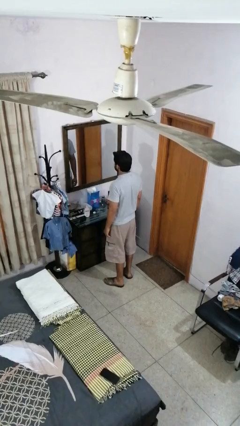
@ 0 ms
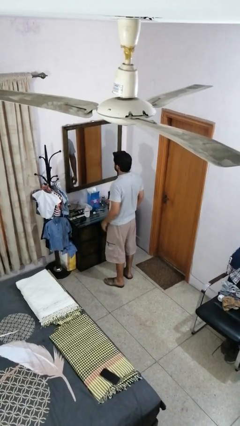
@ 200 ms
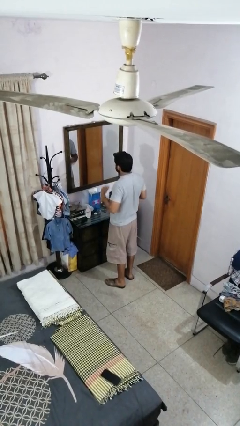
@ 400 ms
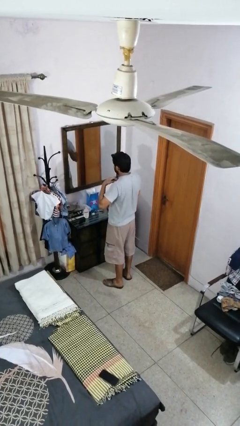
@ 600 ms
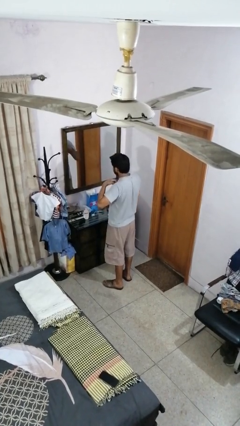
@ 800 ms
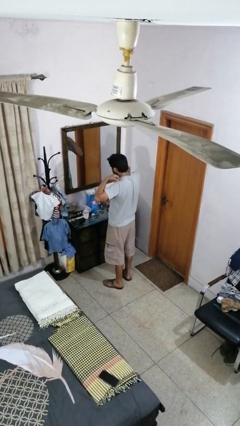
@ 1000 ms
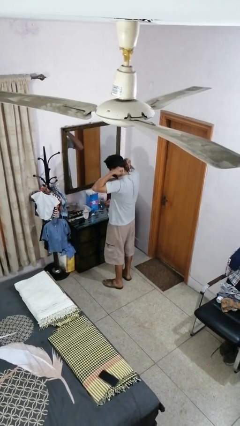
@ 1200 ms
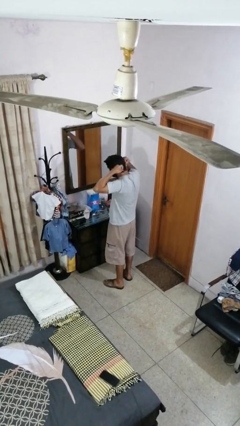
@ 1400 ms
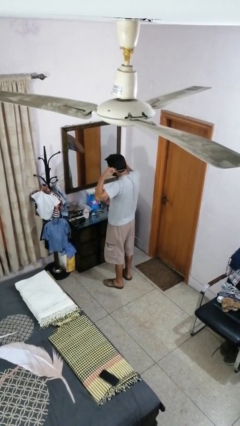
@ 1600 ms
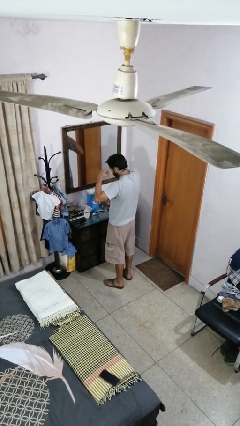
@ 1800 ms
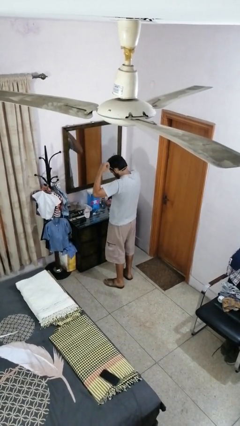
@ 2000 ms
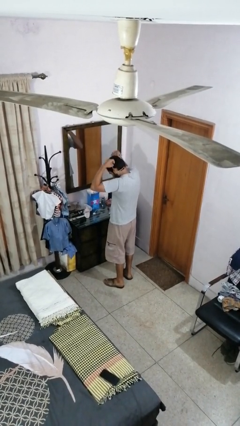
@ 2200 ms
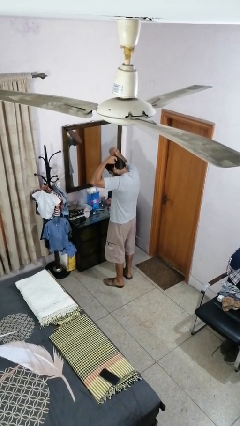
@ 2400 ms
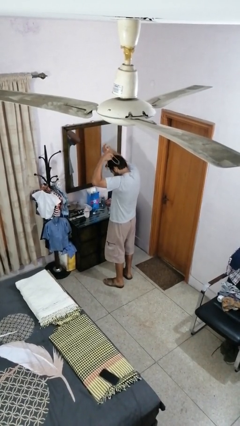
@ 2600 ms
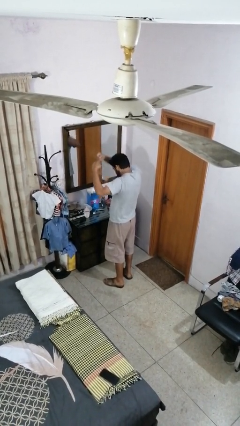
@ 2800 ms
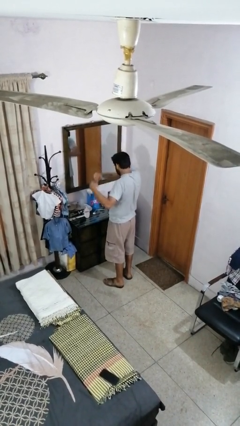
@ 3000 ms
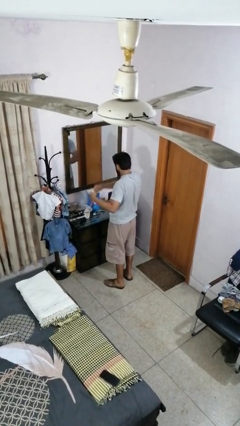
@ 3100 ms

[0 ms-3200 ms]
person takes off necklace

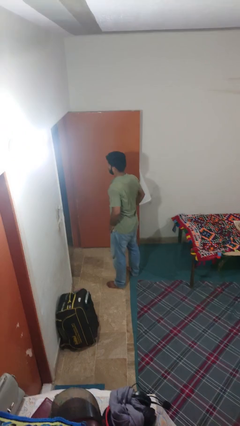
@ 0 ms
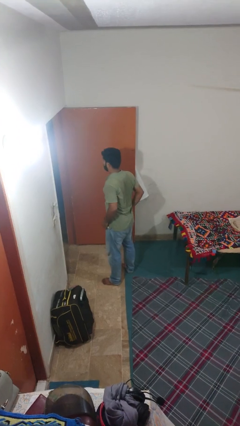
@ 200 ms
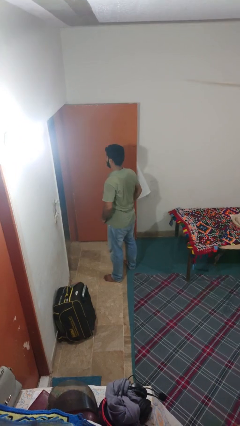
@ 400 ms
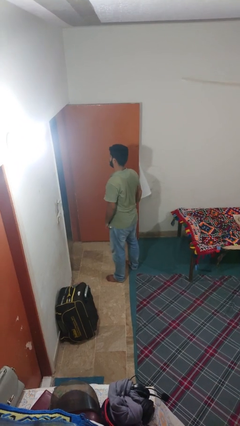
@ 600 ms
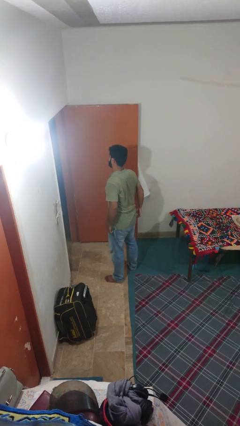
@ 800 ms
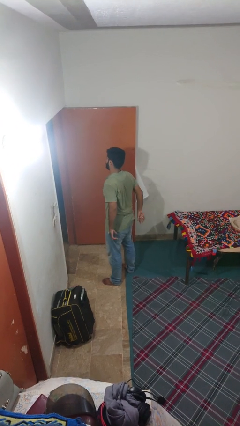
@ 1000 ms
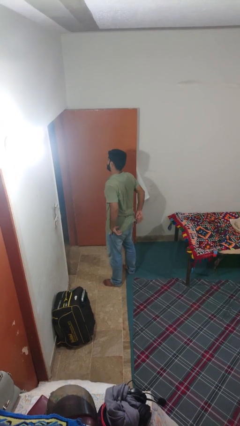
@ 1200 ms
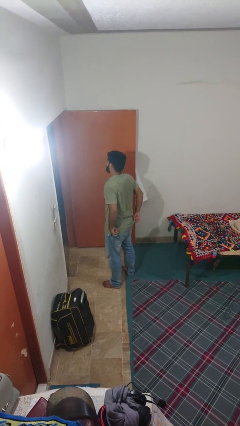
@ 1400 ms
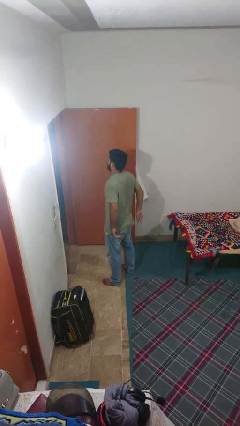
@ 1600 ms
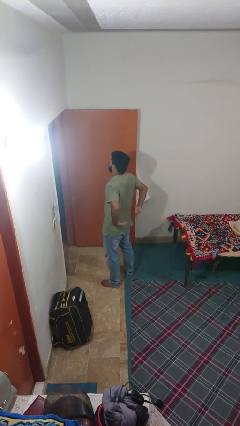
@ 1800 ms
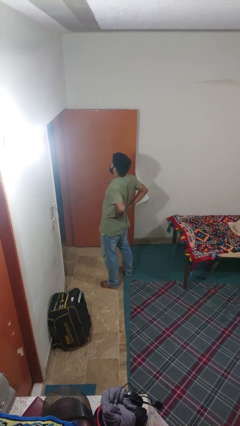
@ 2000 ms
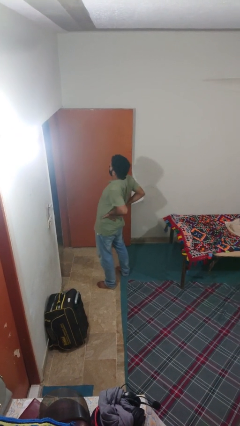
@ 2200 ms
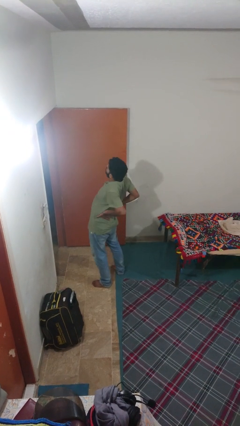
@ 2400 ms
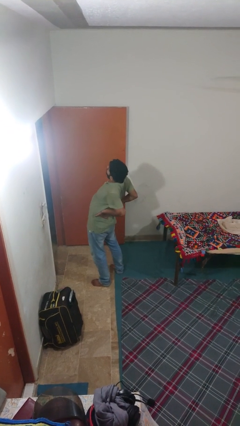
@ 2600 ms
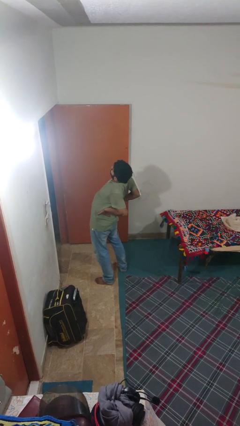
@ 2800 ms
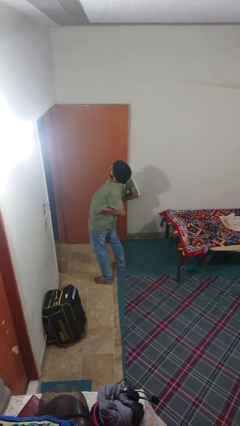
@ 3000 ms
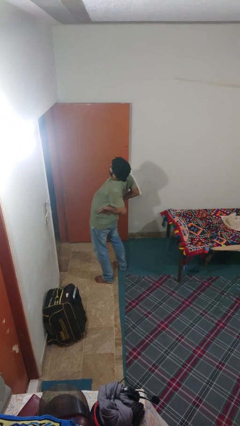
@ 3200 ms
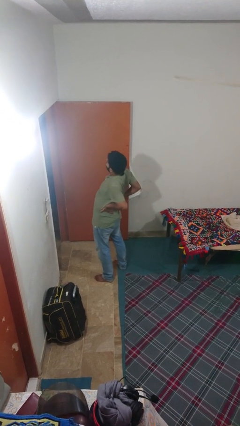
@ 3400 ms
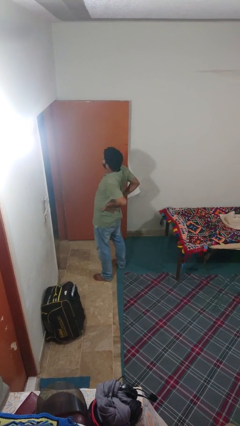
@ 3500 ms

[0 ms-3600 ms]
person stretches back

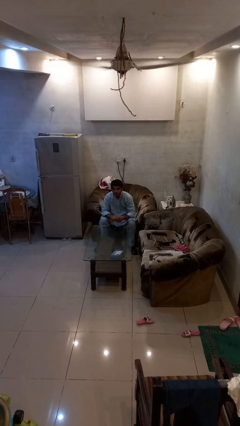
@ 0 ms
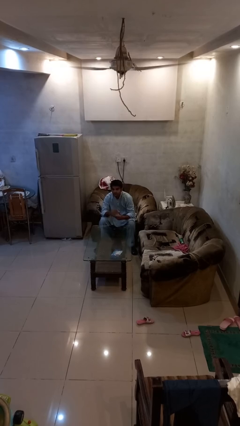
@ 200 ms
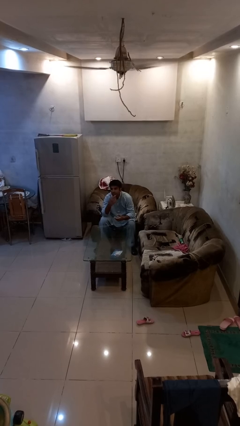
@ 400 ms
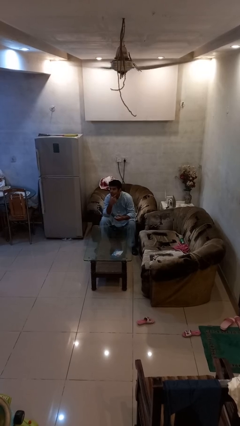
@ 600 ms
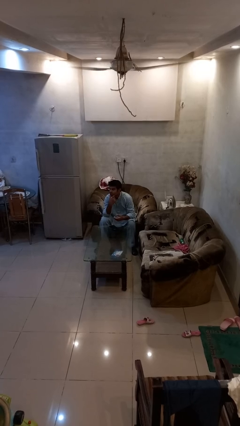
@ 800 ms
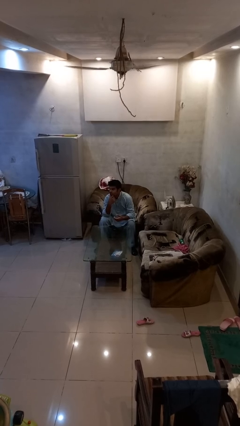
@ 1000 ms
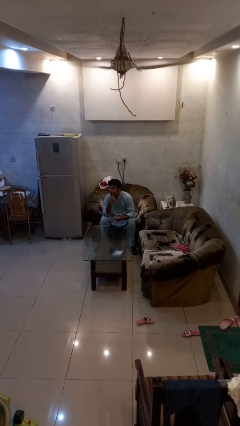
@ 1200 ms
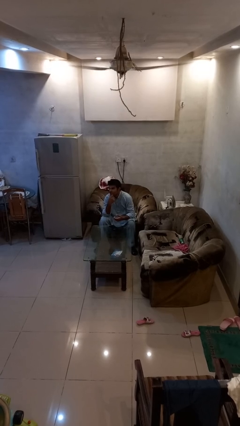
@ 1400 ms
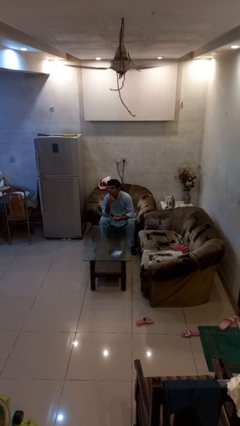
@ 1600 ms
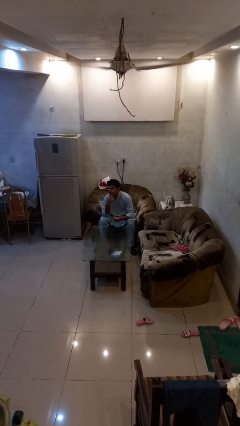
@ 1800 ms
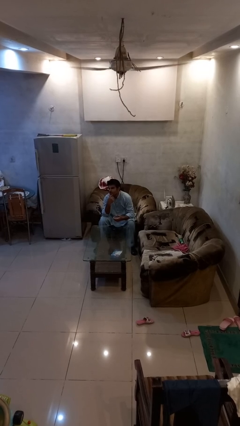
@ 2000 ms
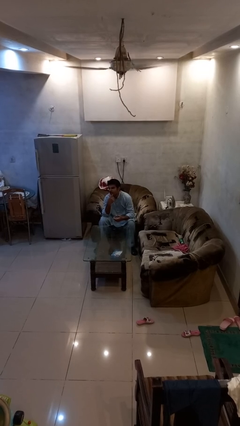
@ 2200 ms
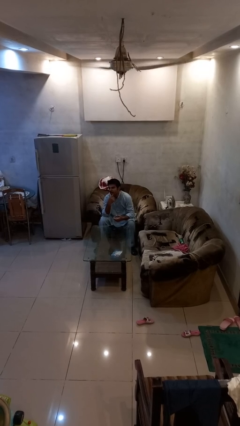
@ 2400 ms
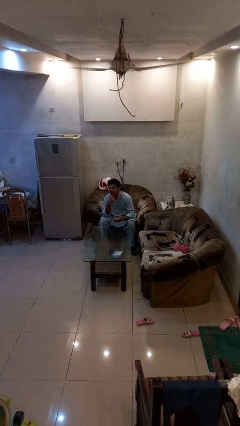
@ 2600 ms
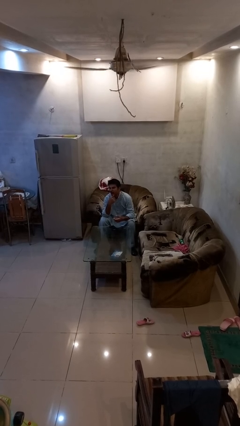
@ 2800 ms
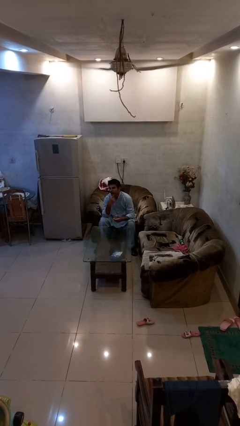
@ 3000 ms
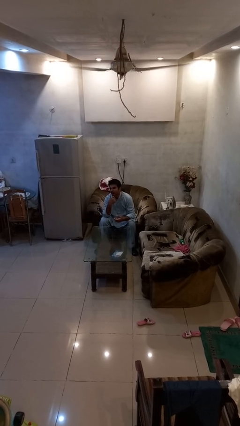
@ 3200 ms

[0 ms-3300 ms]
person scratches face

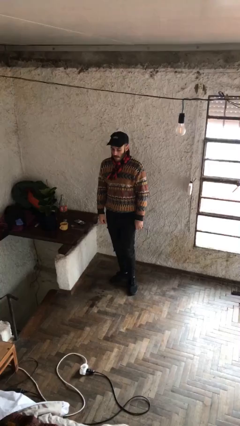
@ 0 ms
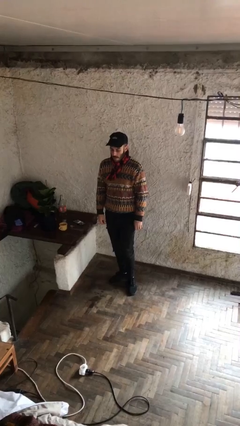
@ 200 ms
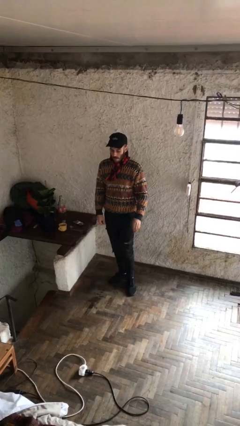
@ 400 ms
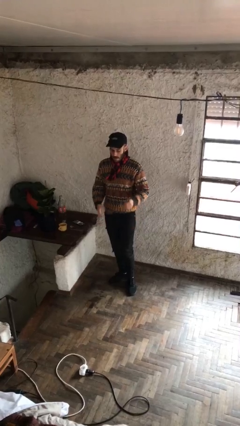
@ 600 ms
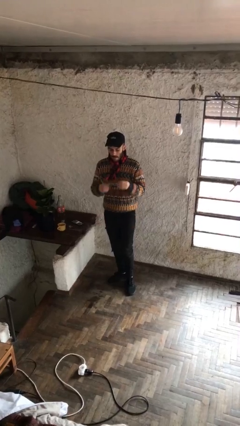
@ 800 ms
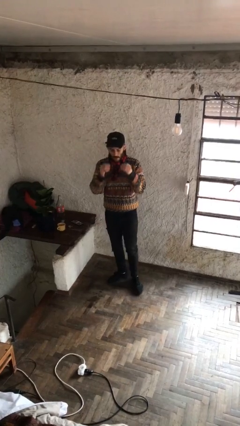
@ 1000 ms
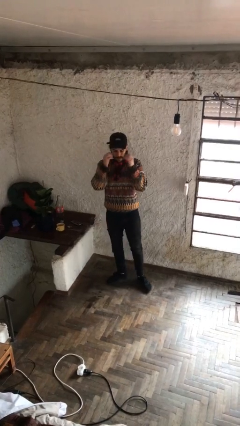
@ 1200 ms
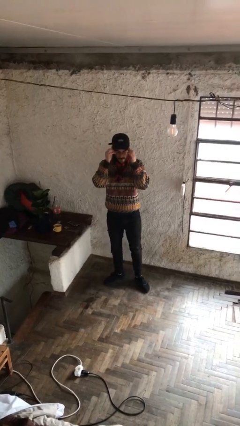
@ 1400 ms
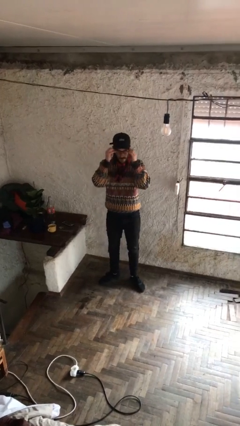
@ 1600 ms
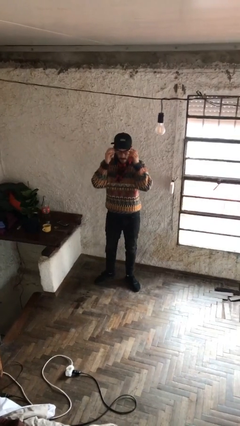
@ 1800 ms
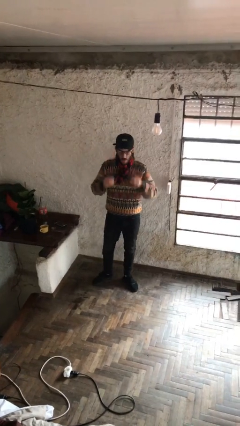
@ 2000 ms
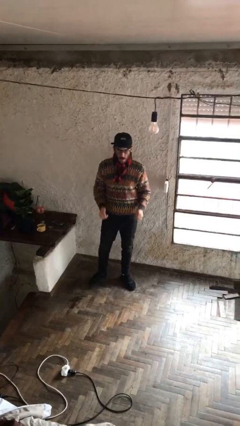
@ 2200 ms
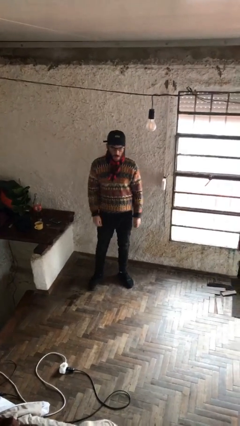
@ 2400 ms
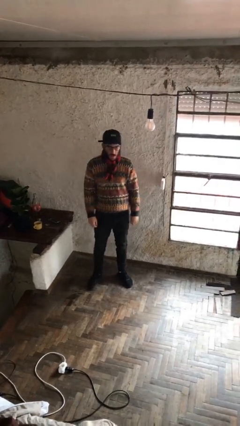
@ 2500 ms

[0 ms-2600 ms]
person puts on glasses

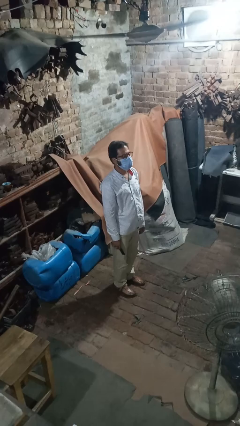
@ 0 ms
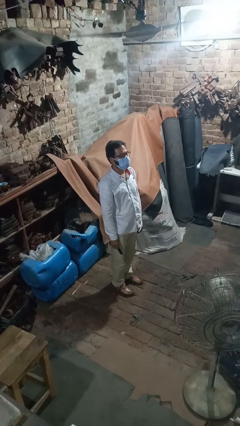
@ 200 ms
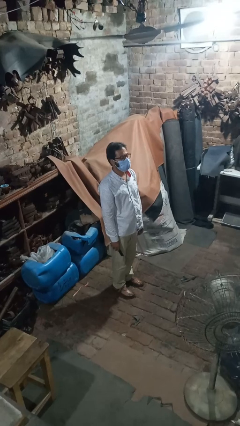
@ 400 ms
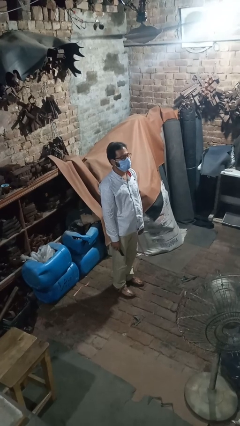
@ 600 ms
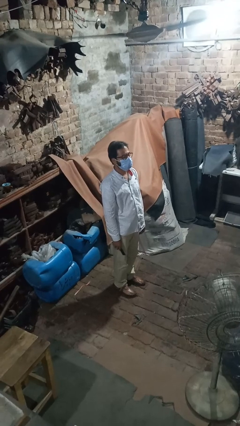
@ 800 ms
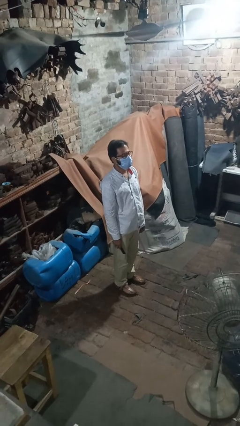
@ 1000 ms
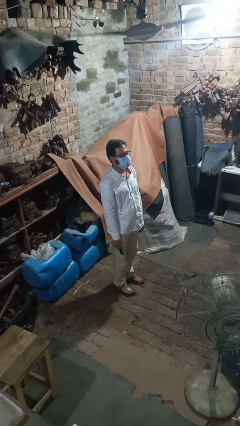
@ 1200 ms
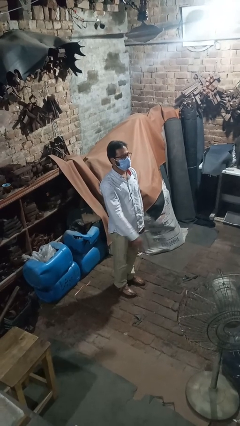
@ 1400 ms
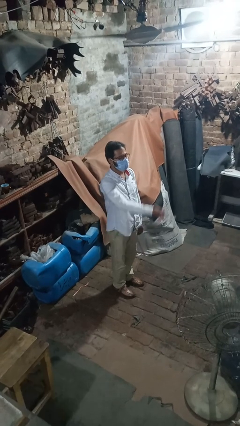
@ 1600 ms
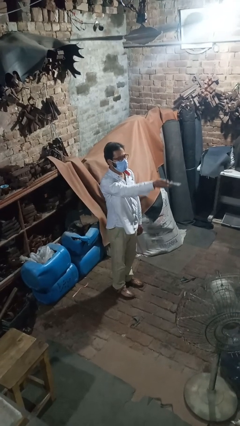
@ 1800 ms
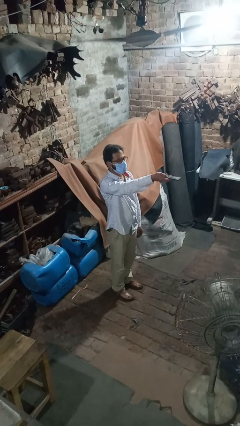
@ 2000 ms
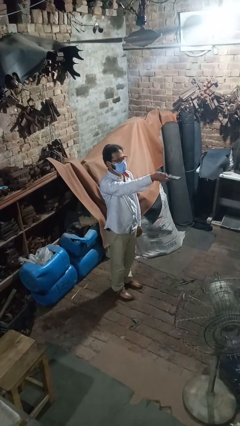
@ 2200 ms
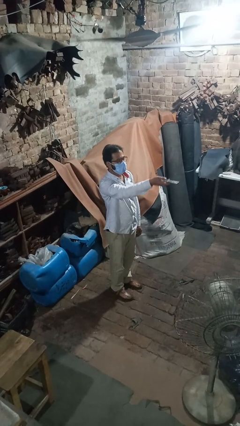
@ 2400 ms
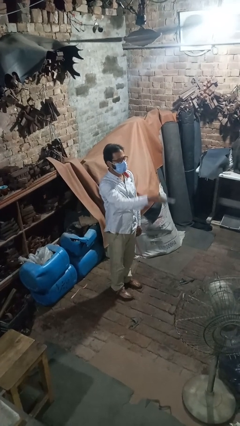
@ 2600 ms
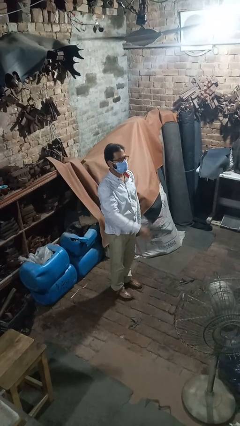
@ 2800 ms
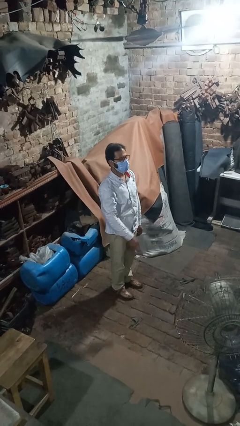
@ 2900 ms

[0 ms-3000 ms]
person uses television remote

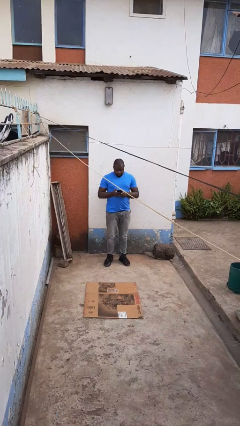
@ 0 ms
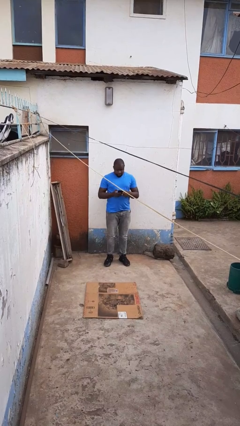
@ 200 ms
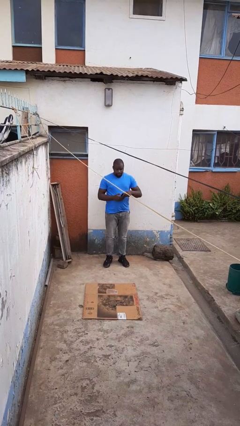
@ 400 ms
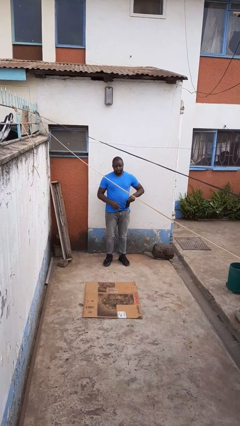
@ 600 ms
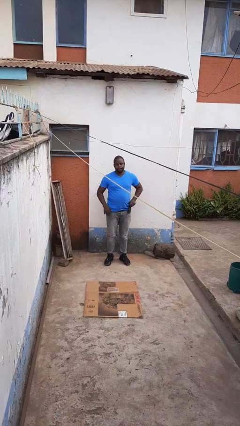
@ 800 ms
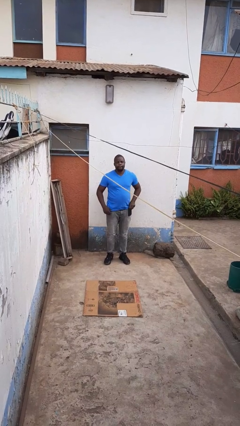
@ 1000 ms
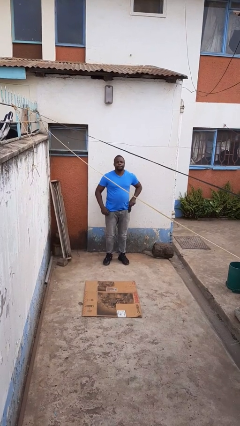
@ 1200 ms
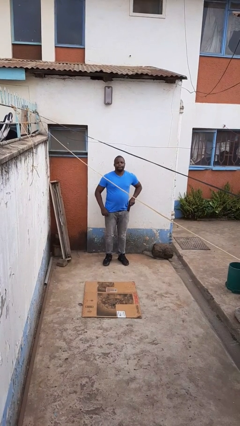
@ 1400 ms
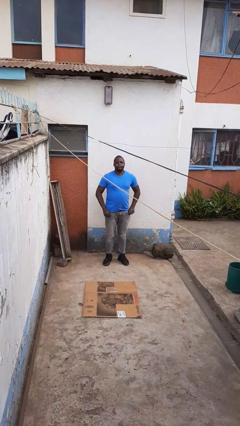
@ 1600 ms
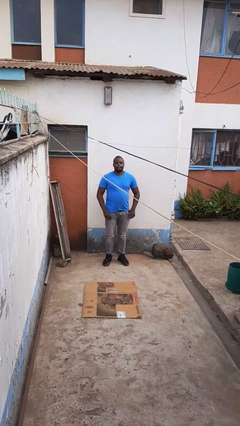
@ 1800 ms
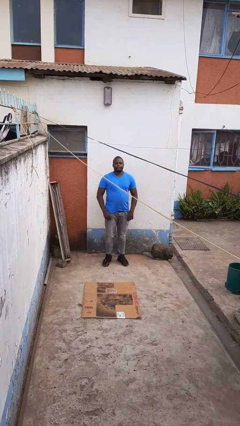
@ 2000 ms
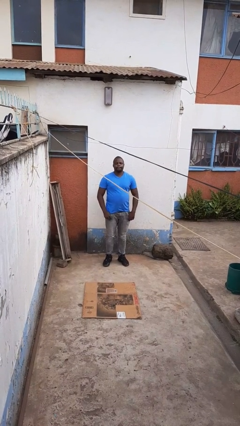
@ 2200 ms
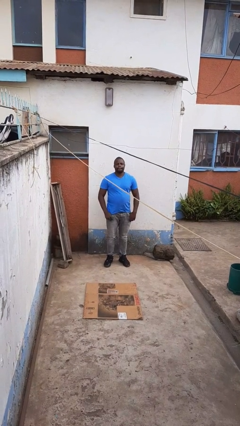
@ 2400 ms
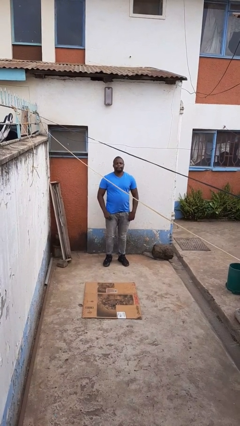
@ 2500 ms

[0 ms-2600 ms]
person puts phone into pocket
